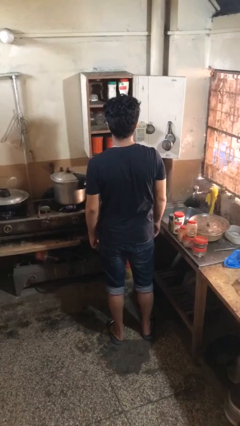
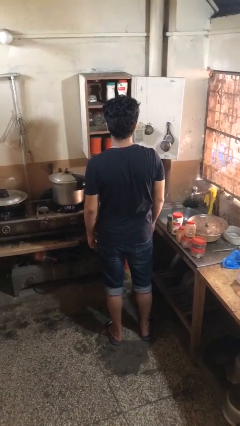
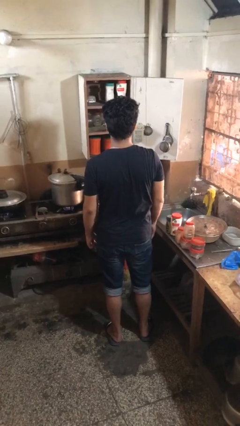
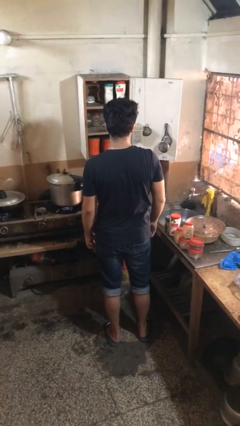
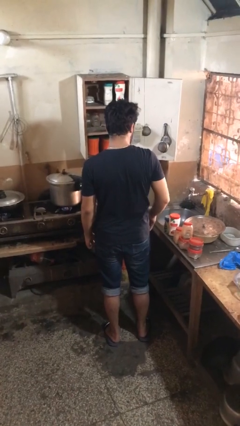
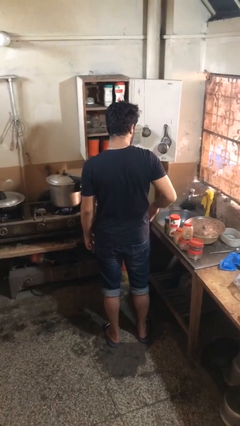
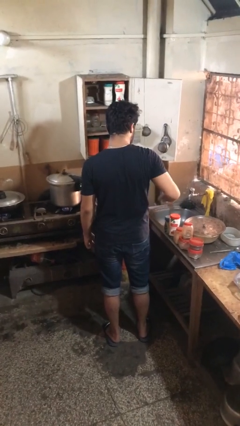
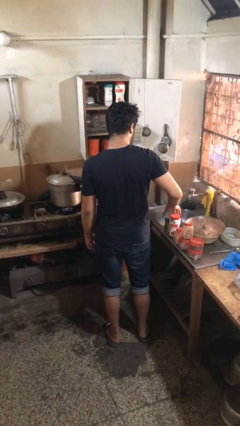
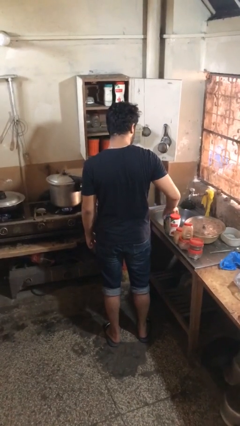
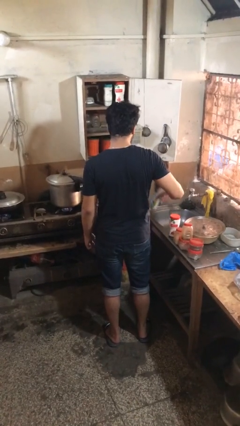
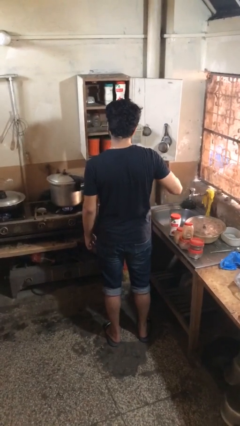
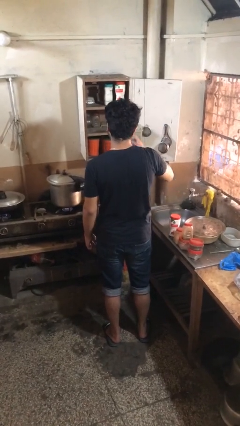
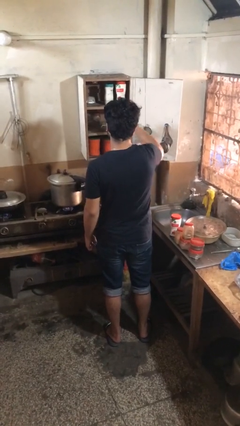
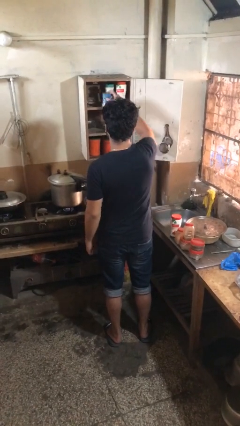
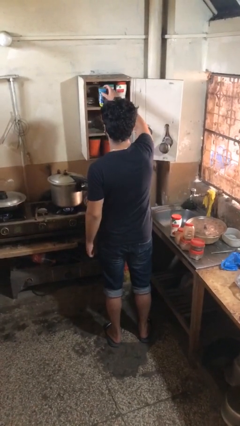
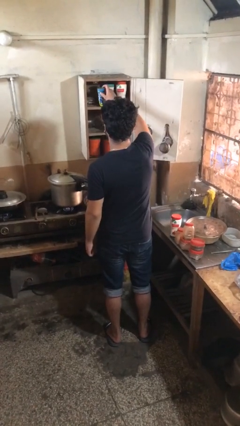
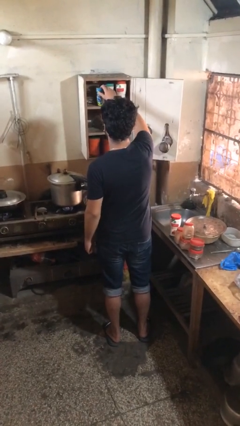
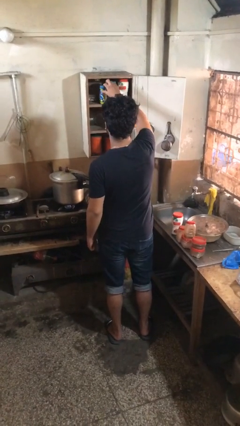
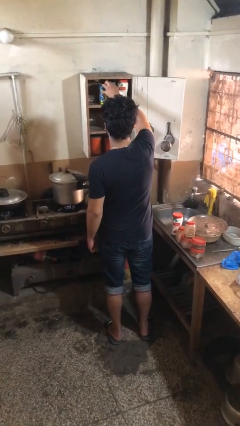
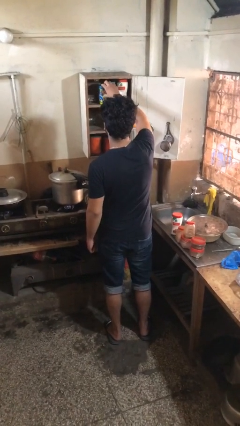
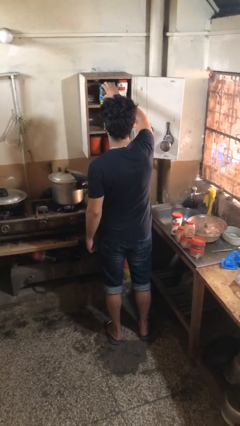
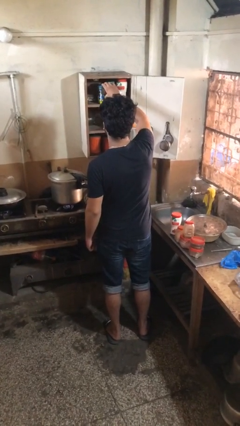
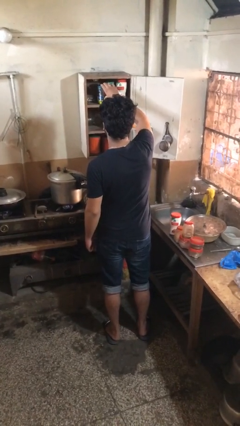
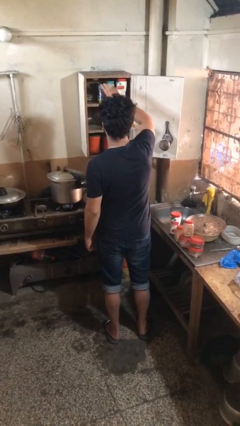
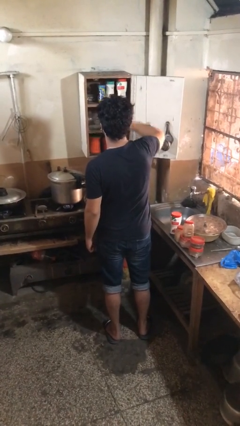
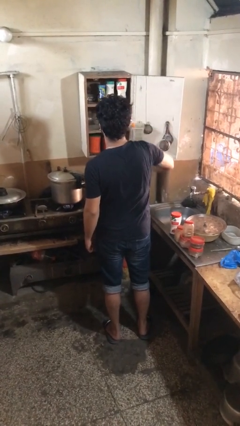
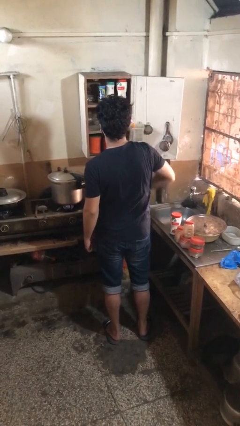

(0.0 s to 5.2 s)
person loads groceries into cabinet

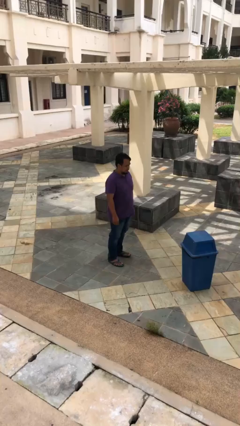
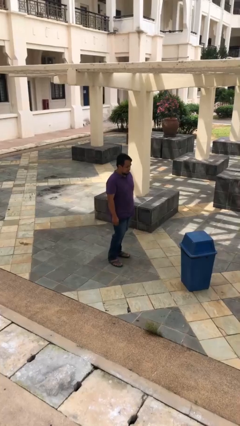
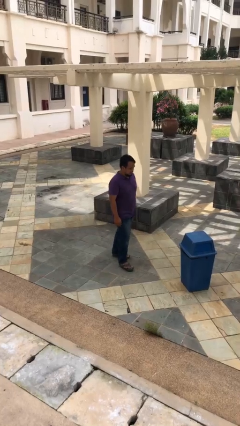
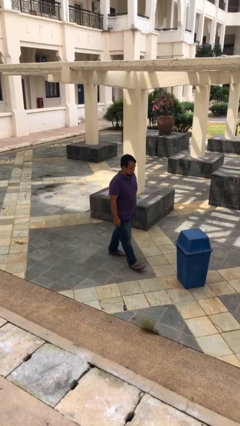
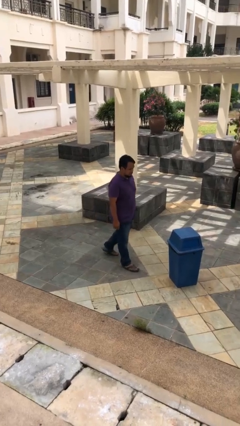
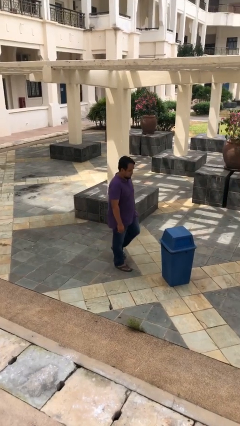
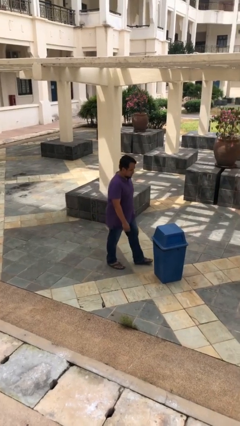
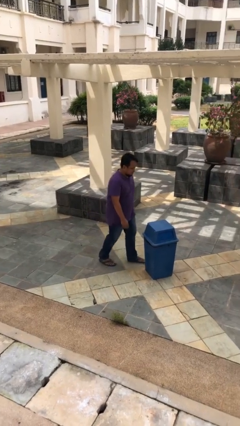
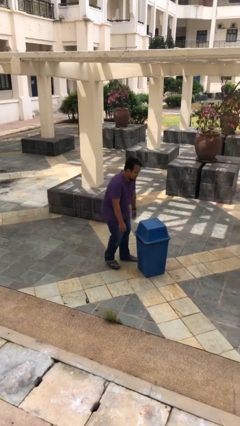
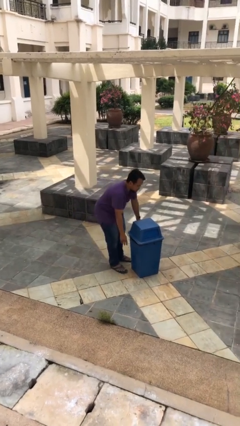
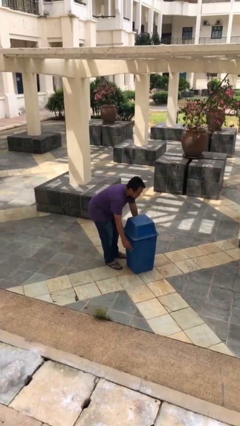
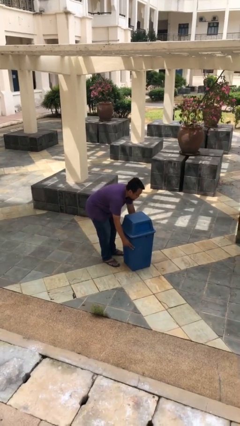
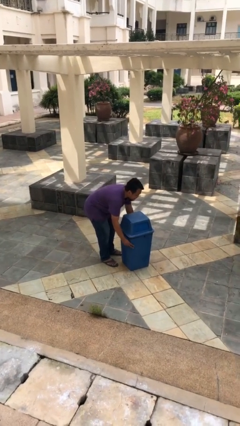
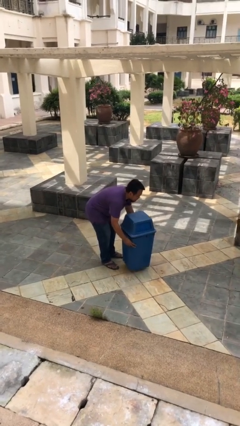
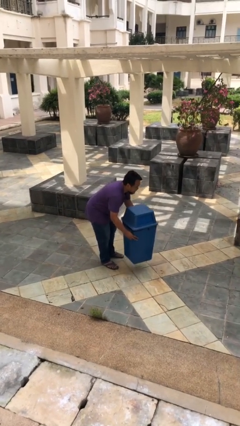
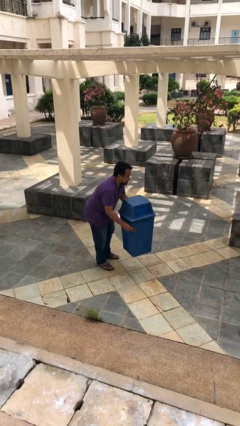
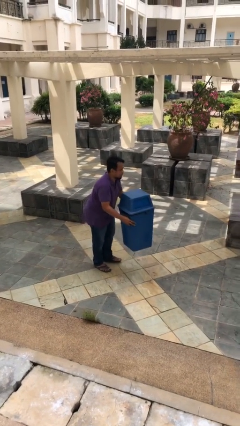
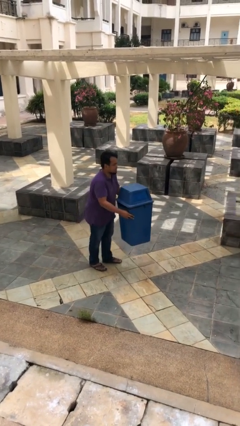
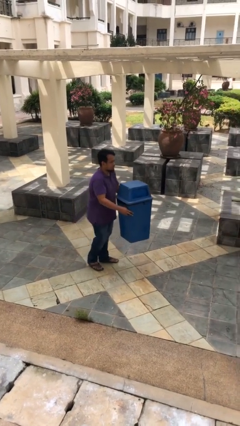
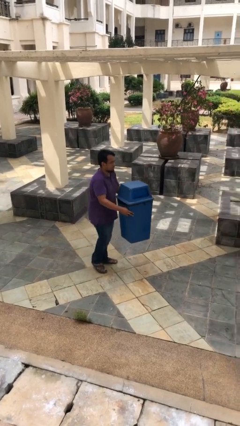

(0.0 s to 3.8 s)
person picks up object from floor

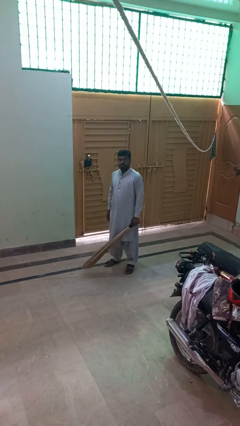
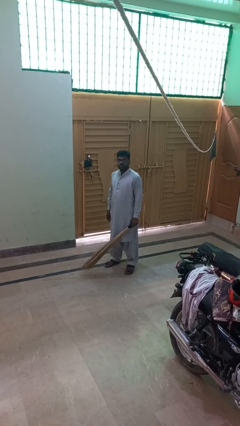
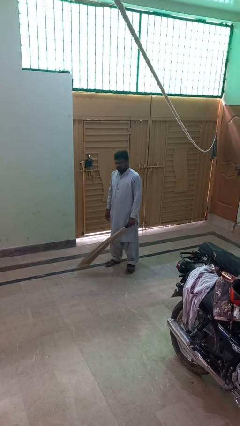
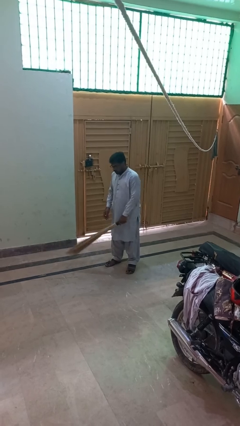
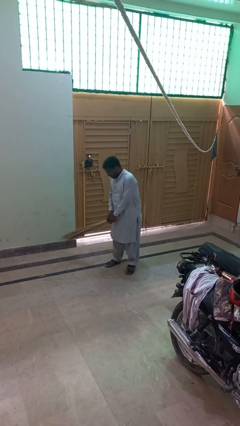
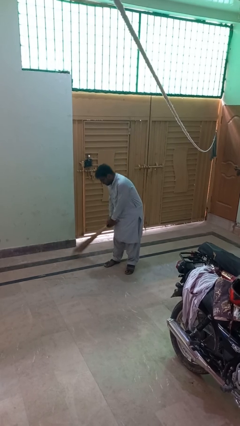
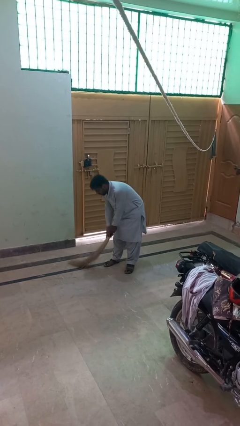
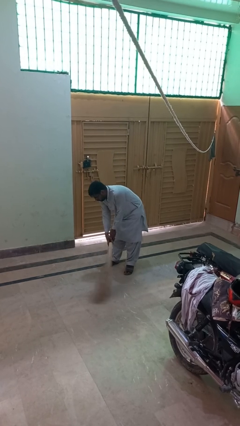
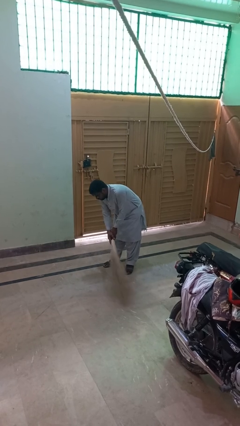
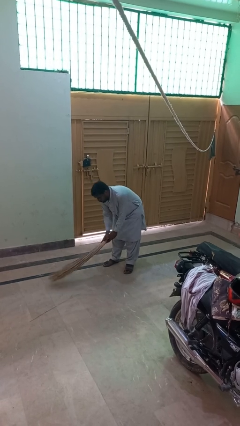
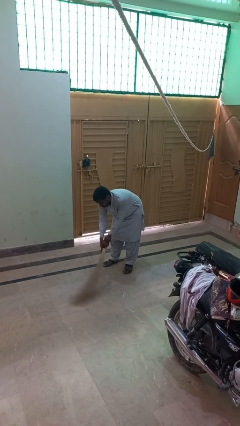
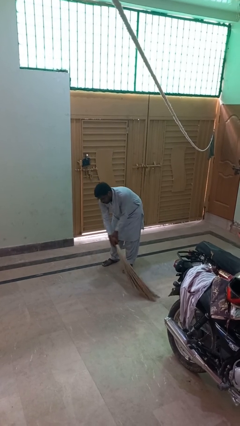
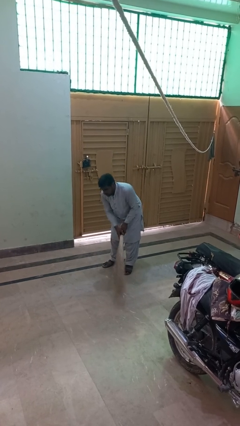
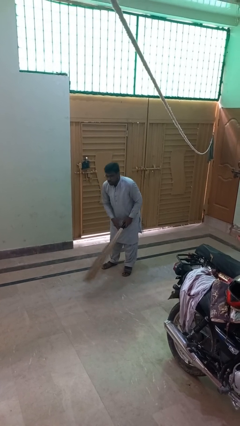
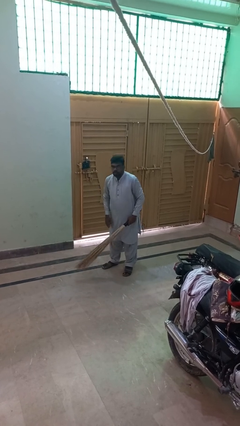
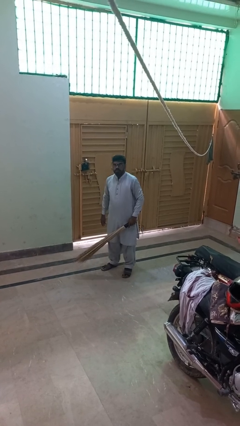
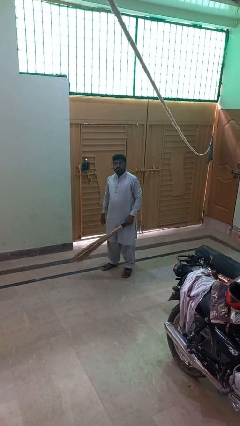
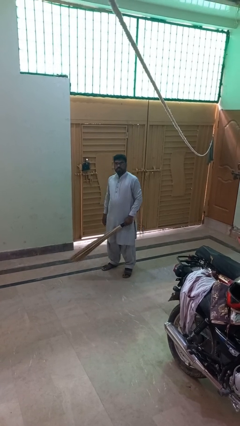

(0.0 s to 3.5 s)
person sweeps floor

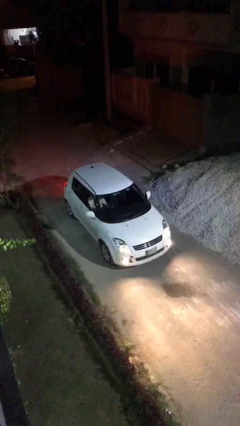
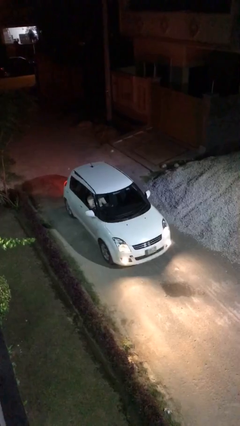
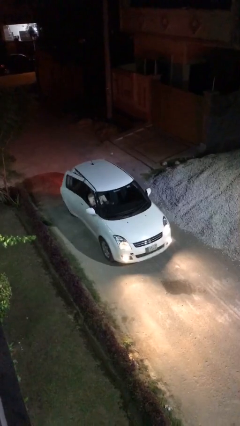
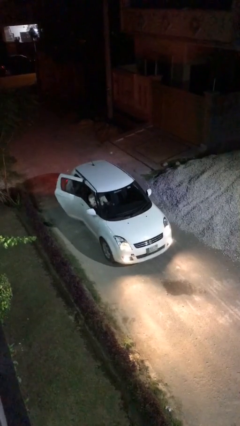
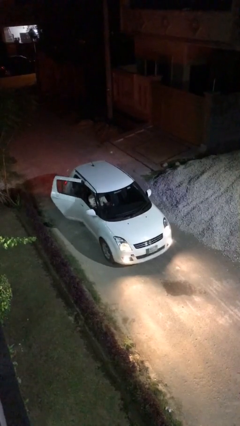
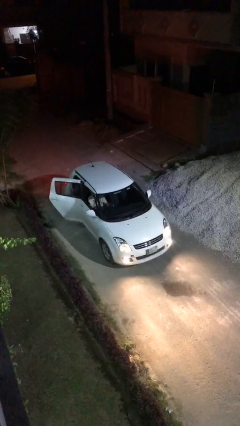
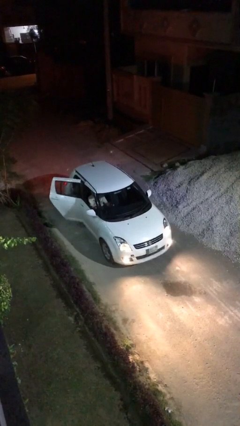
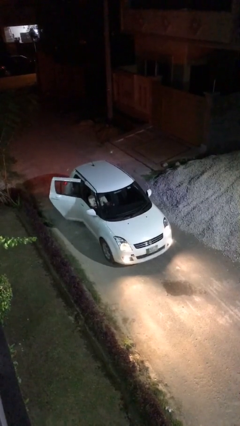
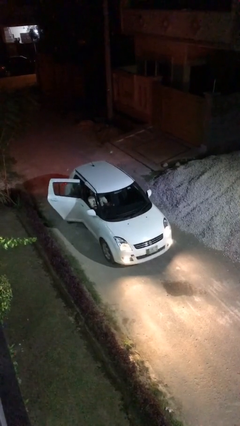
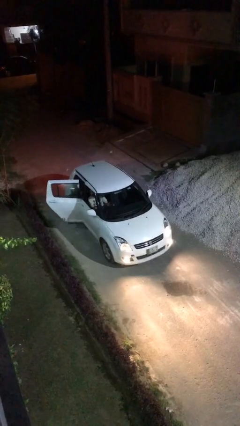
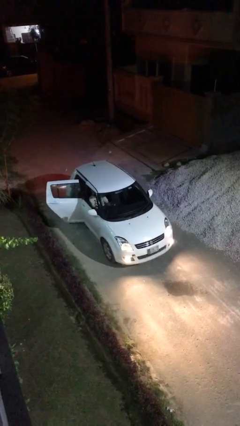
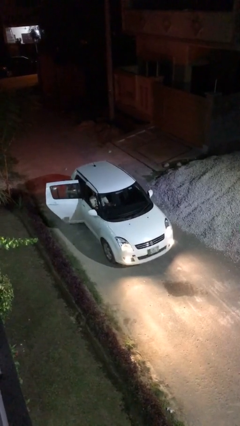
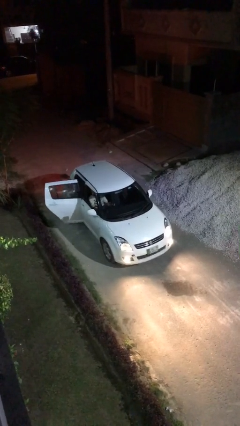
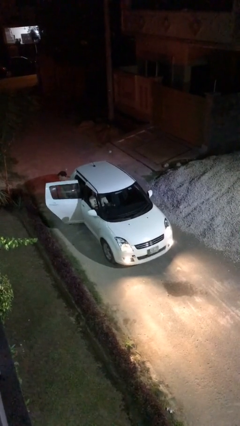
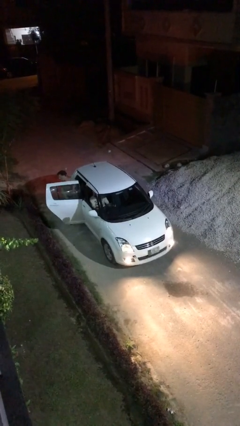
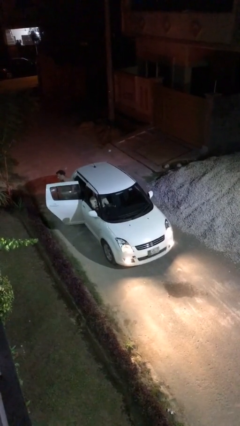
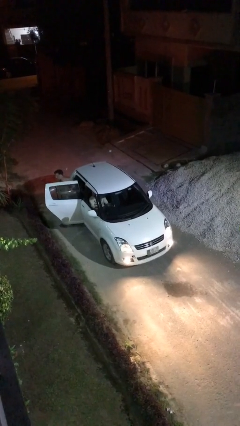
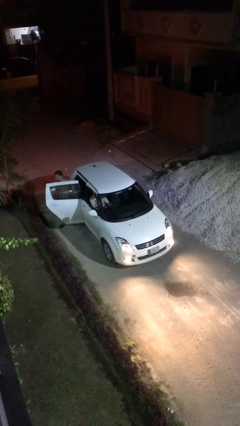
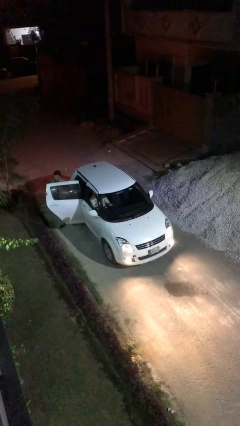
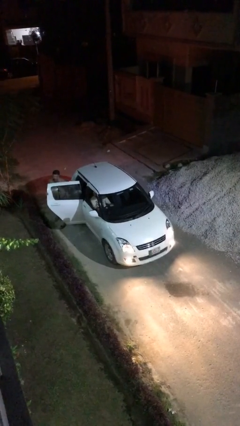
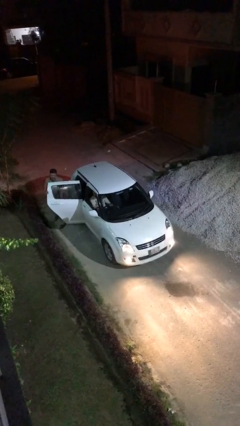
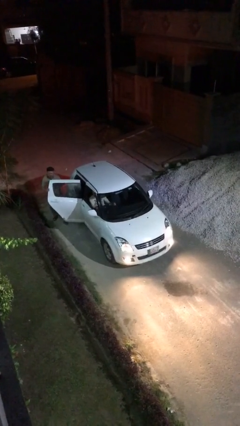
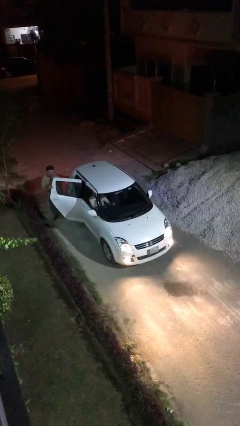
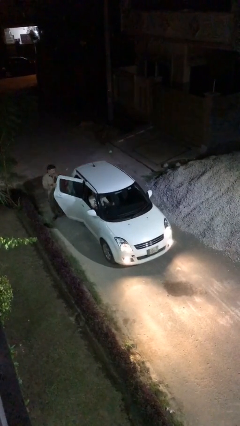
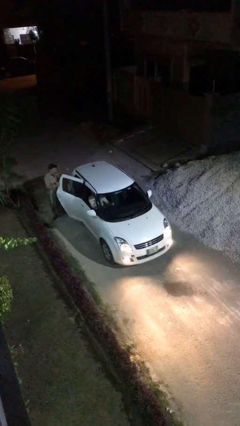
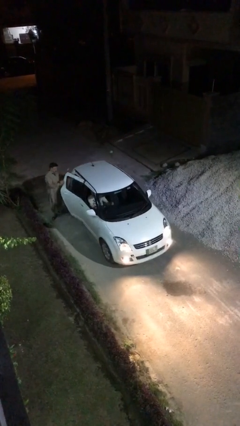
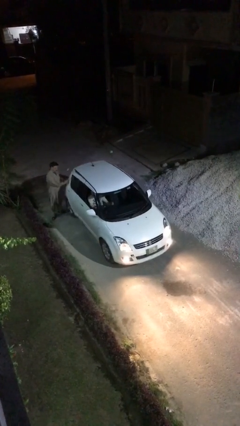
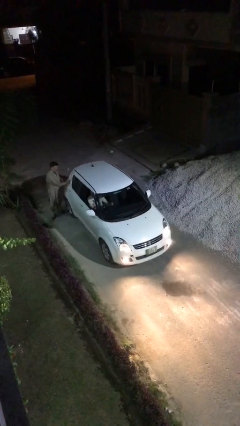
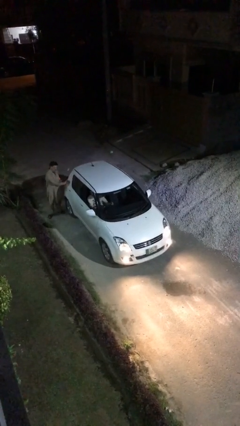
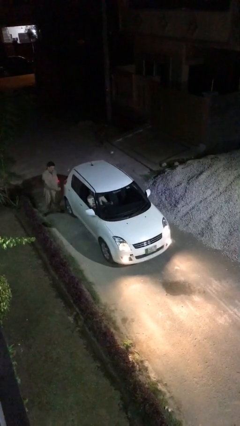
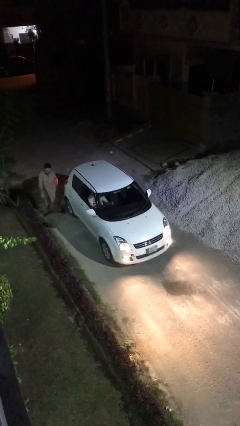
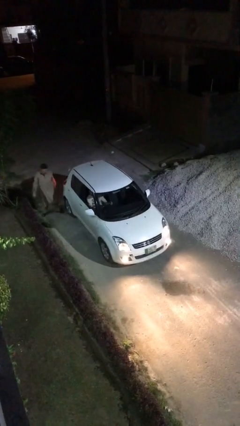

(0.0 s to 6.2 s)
car drops off person
